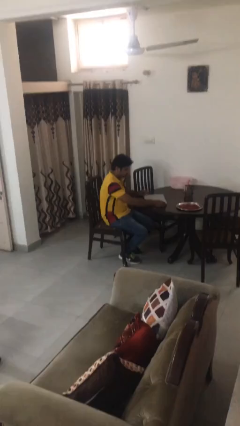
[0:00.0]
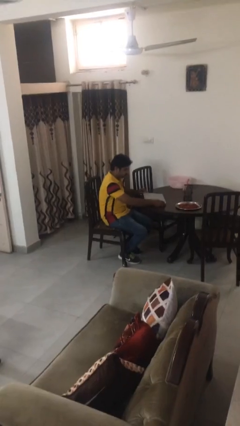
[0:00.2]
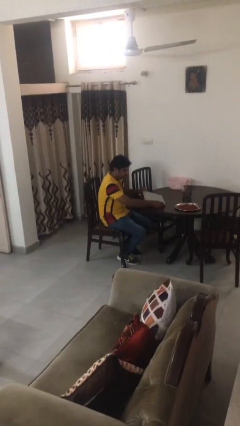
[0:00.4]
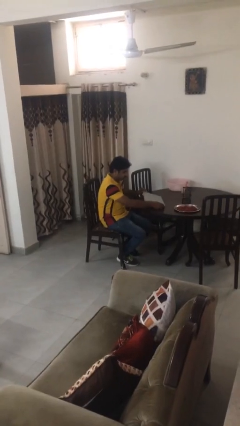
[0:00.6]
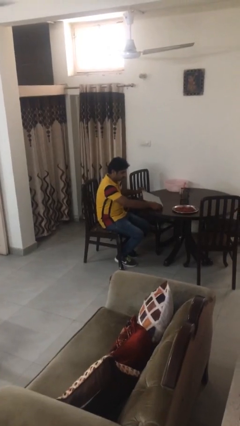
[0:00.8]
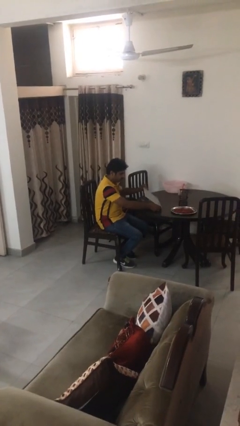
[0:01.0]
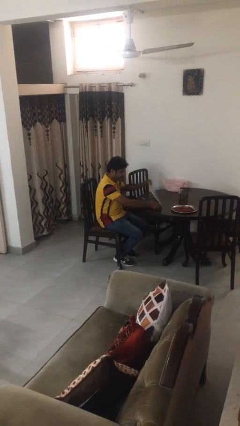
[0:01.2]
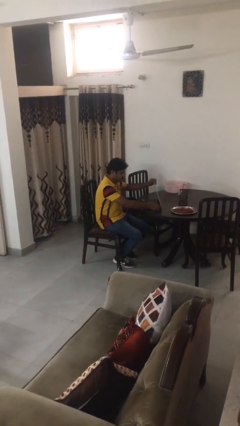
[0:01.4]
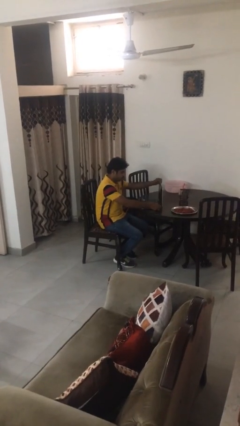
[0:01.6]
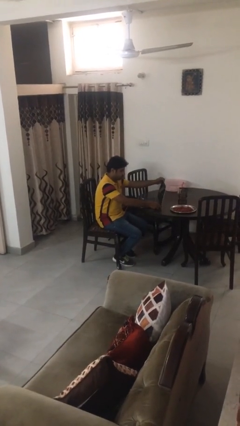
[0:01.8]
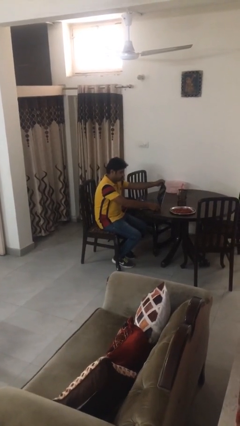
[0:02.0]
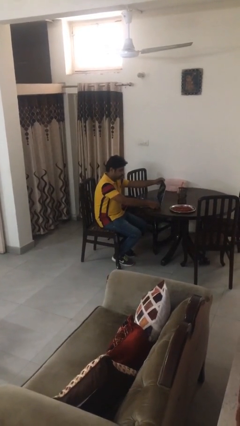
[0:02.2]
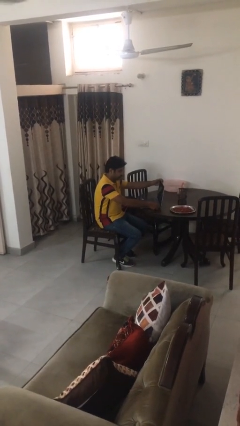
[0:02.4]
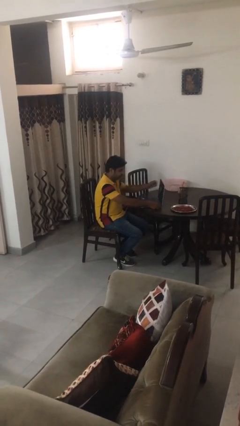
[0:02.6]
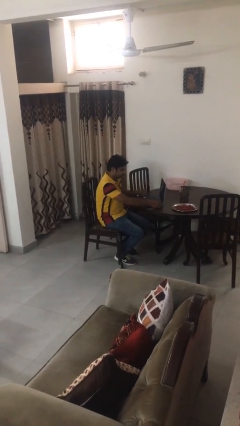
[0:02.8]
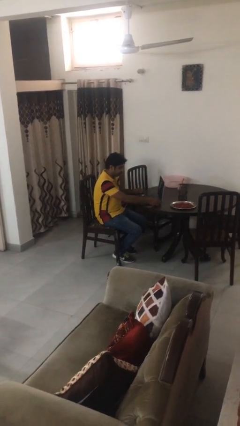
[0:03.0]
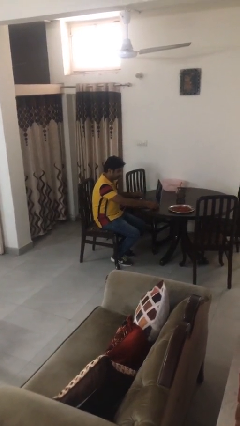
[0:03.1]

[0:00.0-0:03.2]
person opens laptop

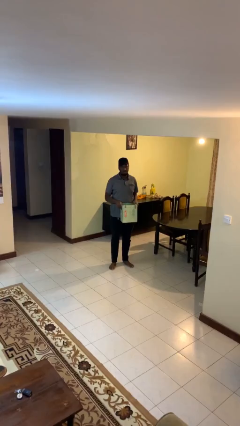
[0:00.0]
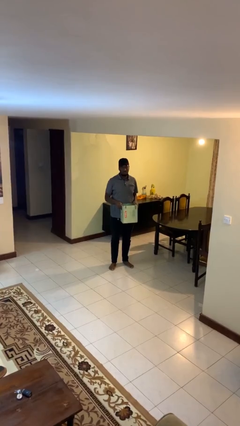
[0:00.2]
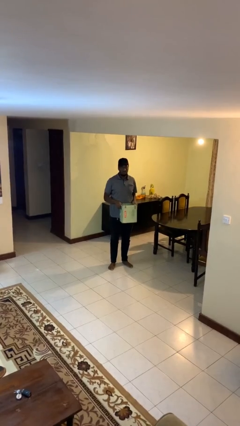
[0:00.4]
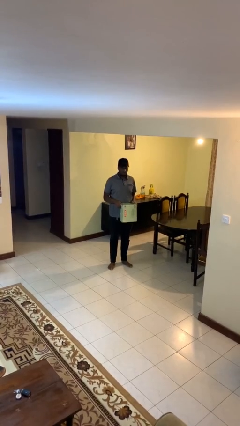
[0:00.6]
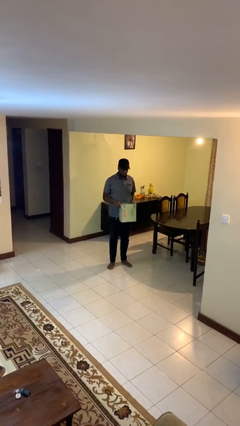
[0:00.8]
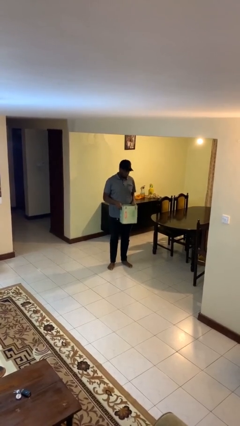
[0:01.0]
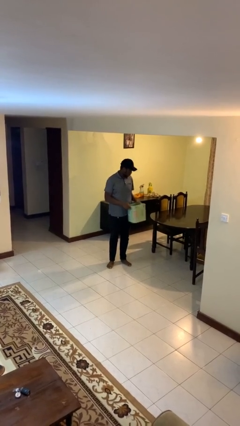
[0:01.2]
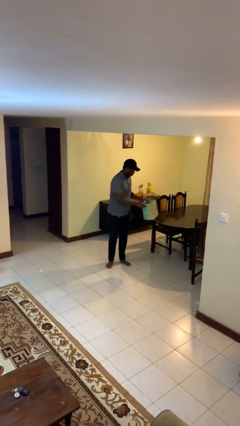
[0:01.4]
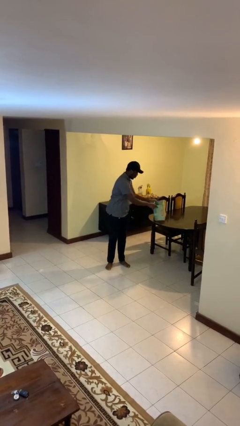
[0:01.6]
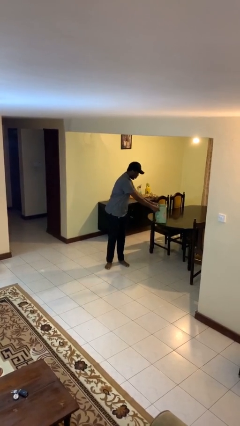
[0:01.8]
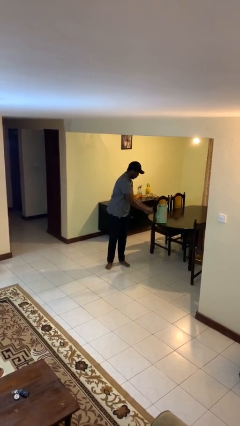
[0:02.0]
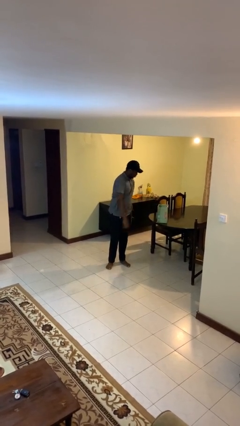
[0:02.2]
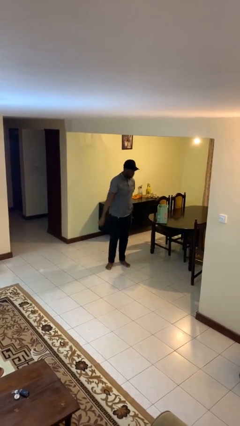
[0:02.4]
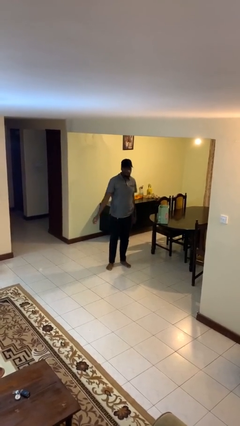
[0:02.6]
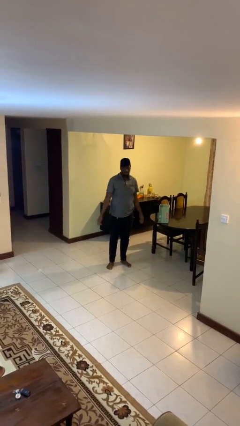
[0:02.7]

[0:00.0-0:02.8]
person puts down object on table

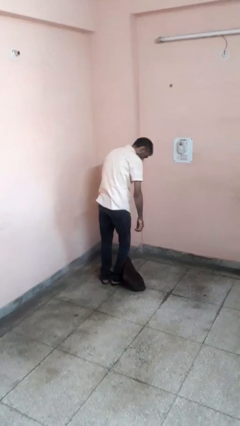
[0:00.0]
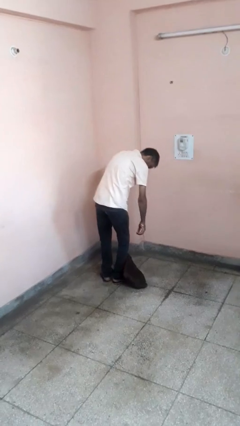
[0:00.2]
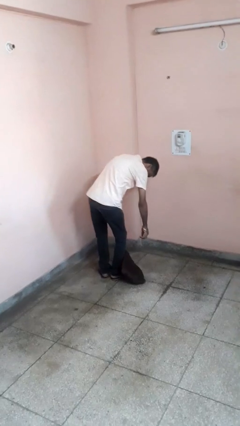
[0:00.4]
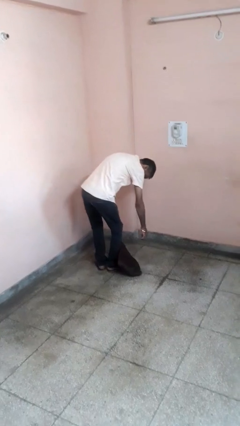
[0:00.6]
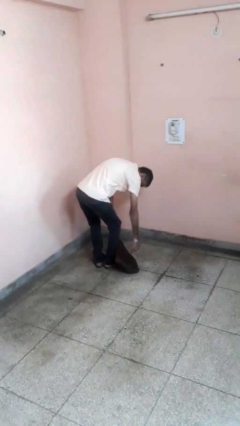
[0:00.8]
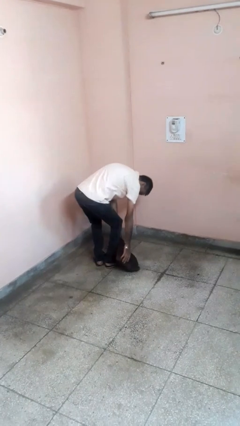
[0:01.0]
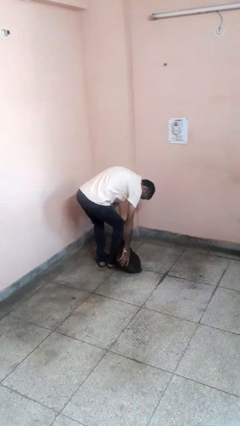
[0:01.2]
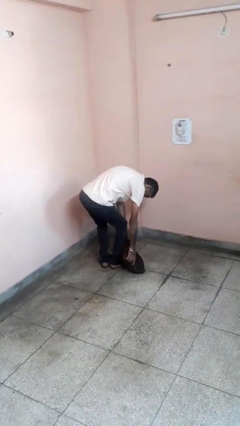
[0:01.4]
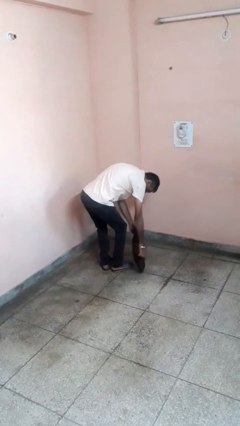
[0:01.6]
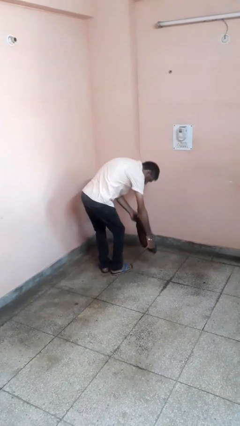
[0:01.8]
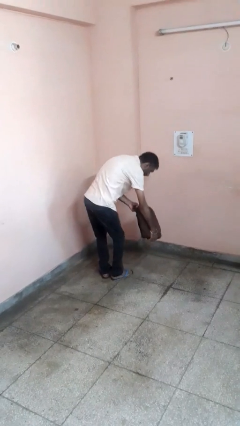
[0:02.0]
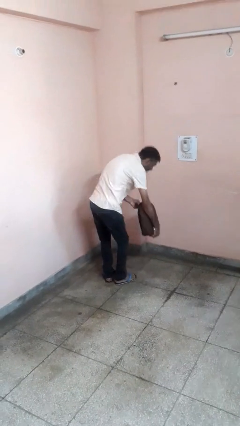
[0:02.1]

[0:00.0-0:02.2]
person picks up object from floor

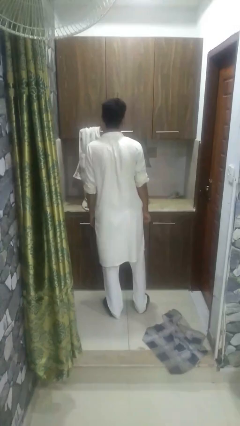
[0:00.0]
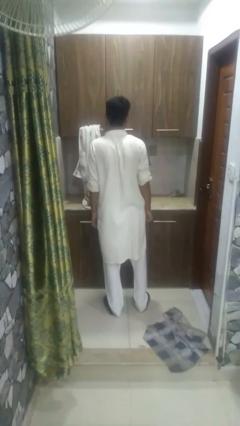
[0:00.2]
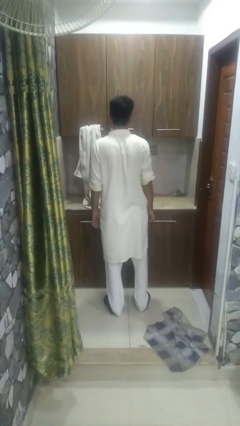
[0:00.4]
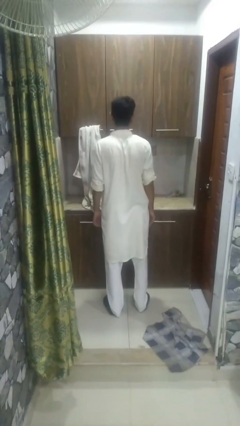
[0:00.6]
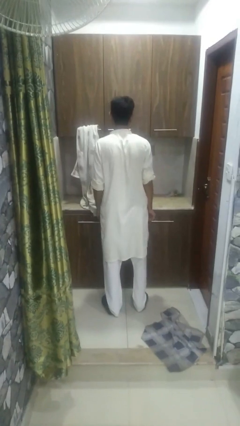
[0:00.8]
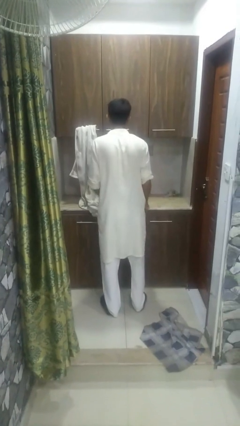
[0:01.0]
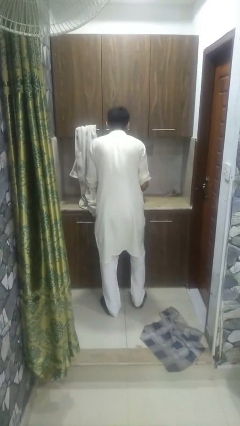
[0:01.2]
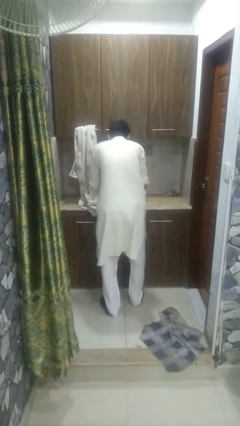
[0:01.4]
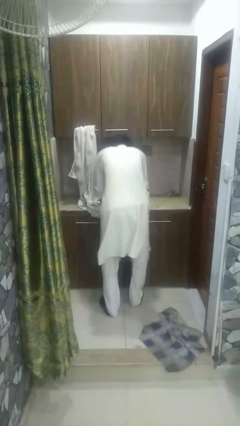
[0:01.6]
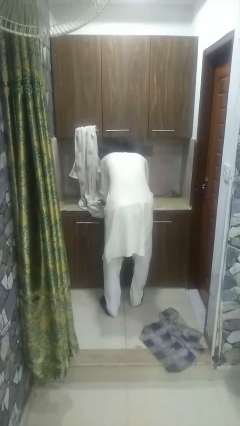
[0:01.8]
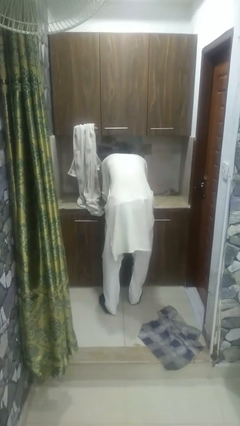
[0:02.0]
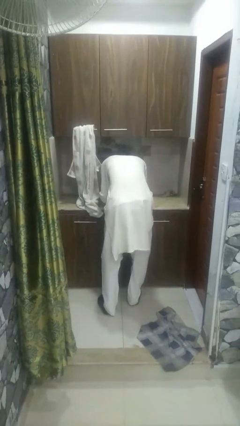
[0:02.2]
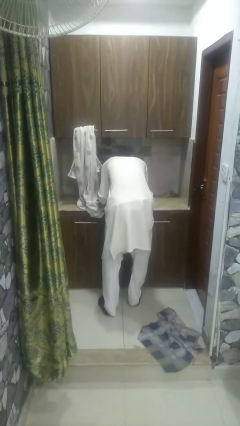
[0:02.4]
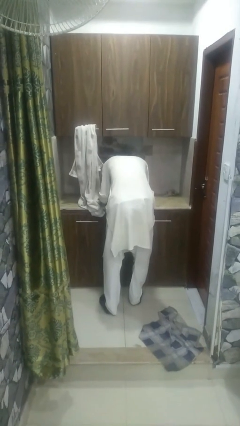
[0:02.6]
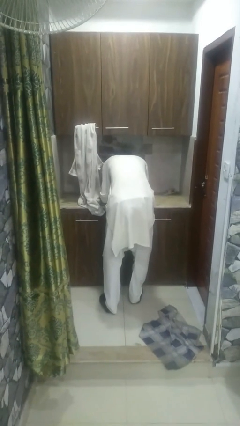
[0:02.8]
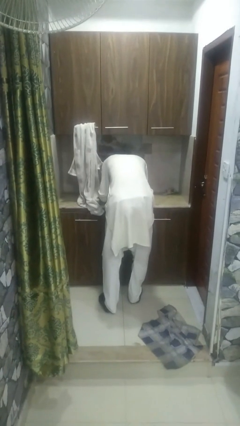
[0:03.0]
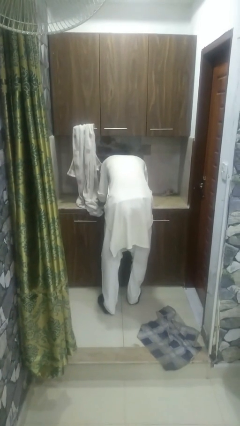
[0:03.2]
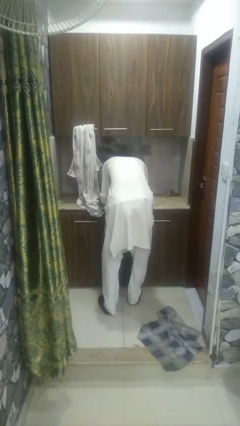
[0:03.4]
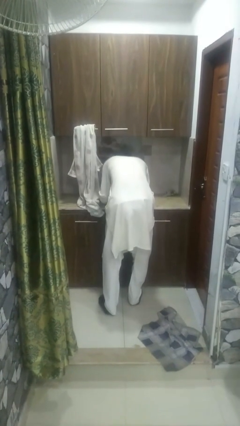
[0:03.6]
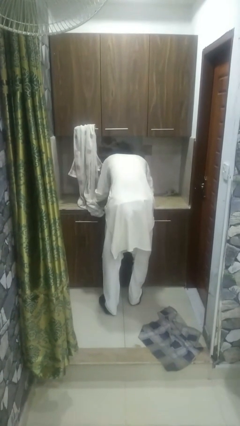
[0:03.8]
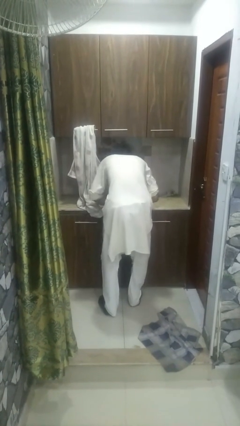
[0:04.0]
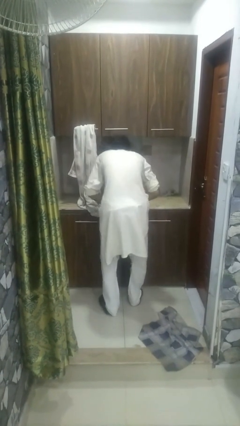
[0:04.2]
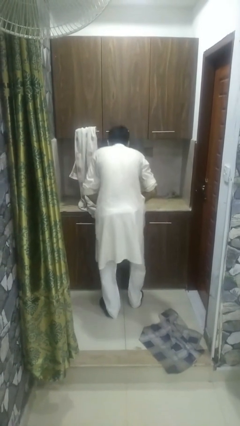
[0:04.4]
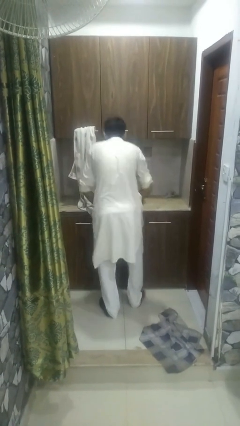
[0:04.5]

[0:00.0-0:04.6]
person washes face

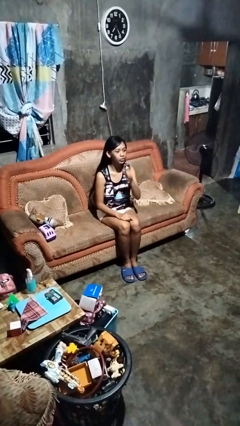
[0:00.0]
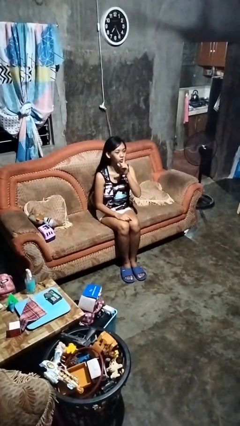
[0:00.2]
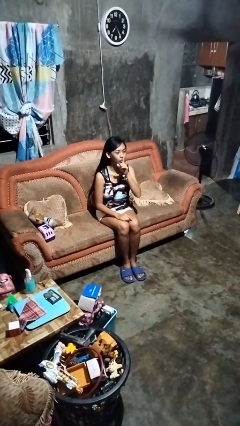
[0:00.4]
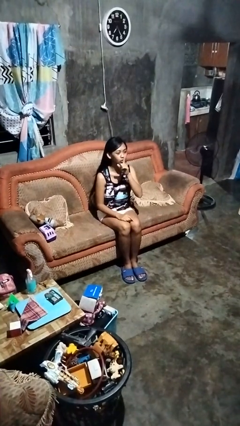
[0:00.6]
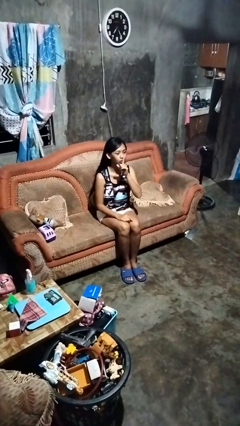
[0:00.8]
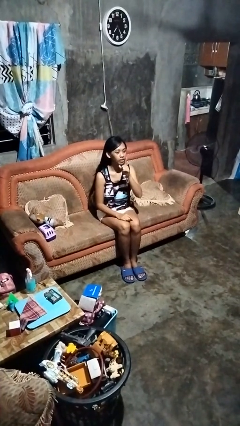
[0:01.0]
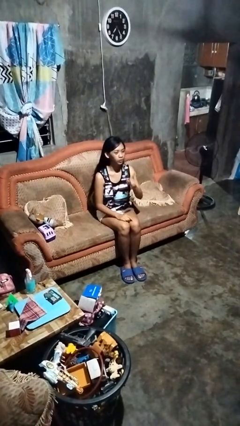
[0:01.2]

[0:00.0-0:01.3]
person gestures be quiet

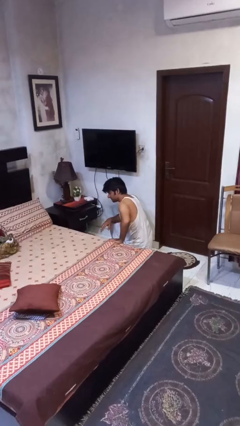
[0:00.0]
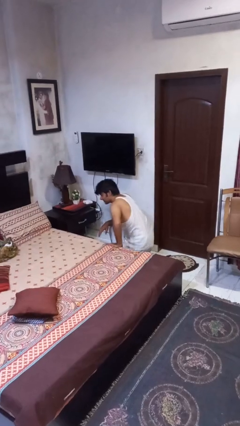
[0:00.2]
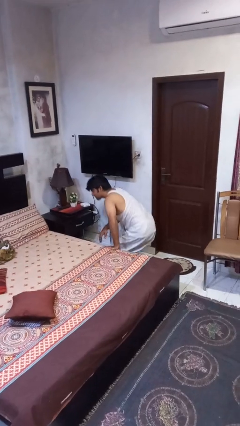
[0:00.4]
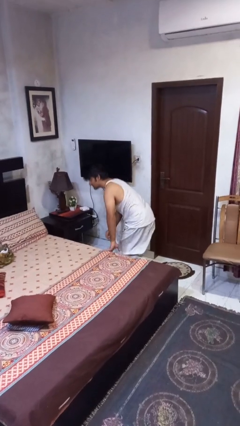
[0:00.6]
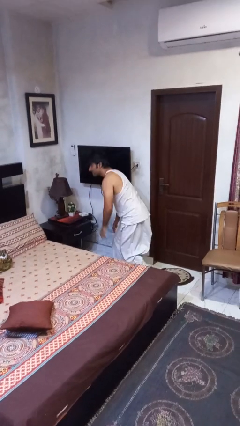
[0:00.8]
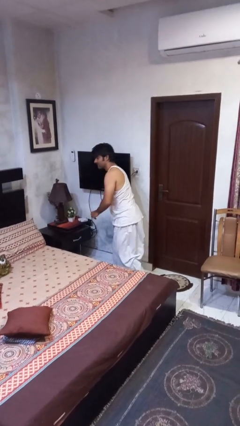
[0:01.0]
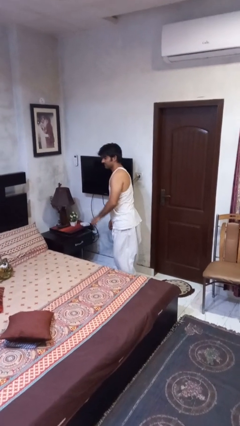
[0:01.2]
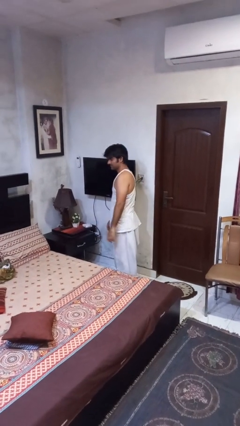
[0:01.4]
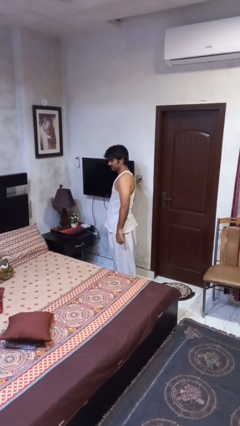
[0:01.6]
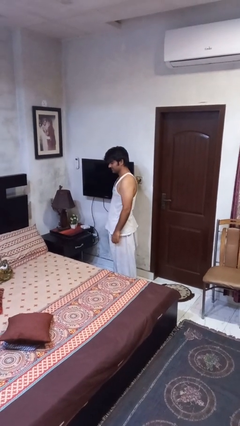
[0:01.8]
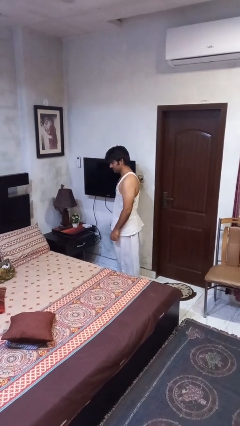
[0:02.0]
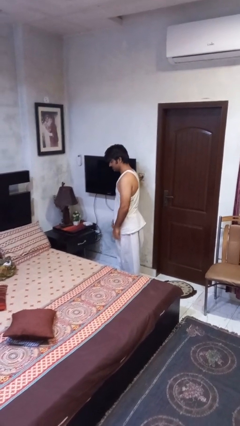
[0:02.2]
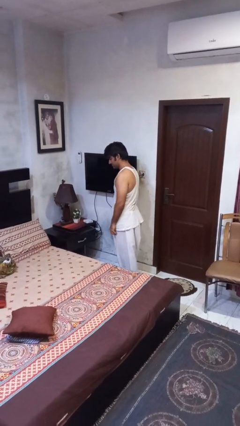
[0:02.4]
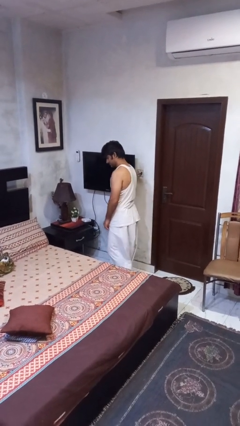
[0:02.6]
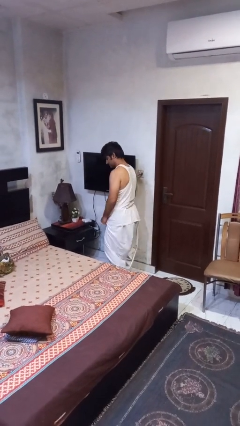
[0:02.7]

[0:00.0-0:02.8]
person stands up from floor
